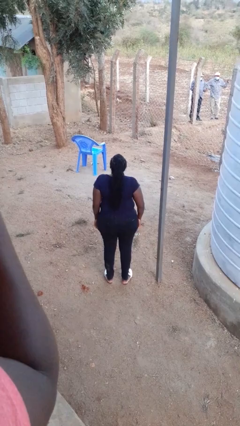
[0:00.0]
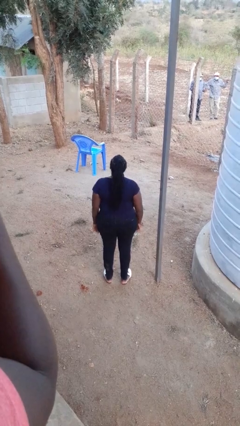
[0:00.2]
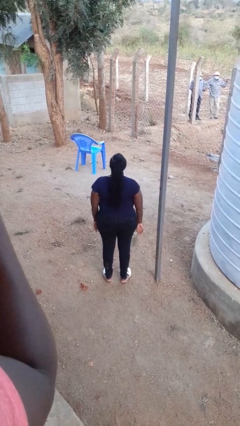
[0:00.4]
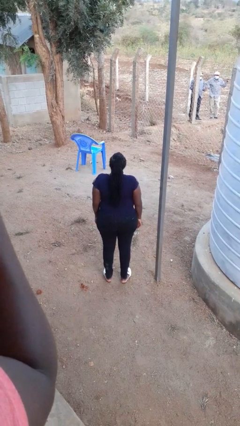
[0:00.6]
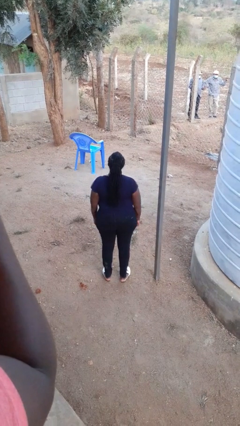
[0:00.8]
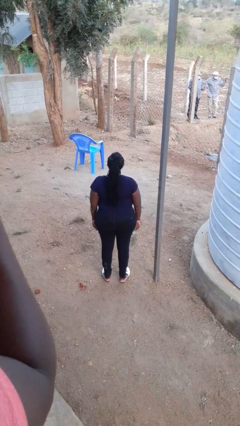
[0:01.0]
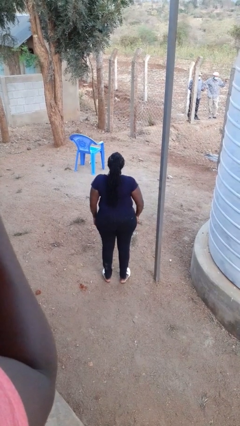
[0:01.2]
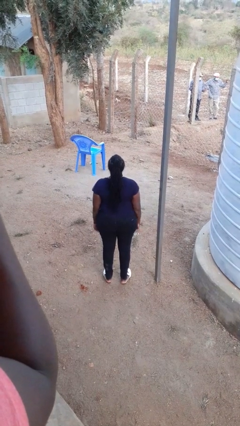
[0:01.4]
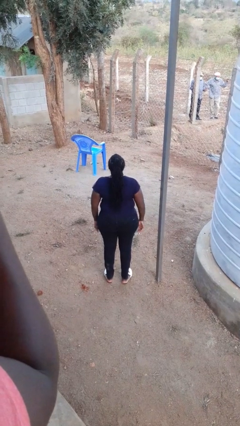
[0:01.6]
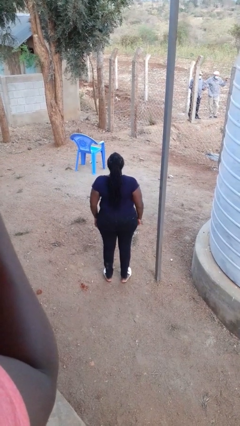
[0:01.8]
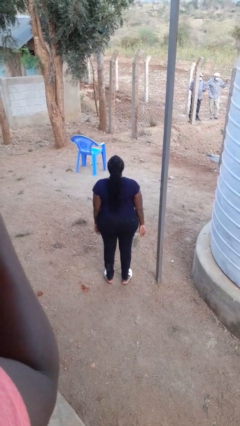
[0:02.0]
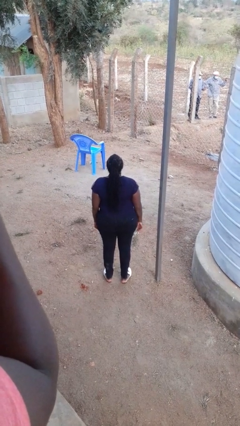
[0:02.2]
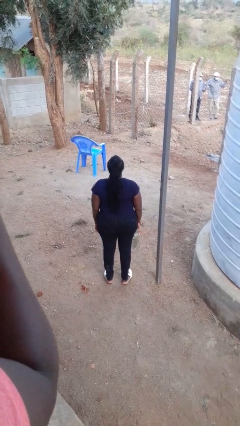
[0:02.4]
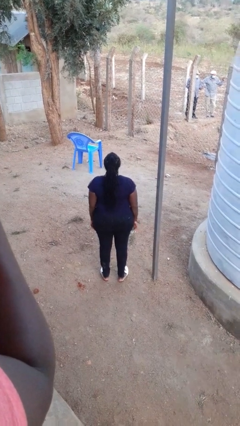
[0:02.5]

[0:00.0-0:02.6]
person shrugs

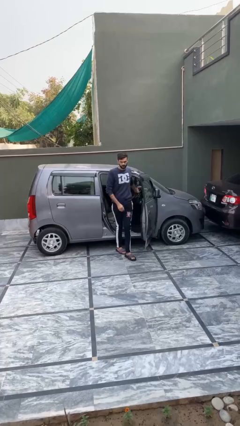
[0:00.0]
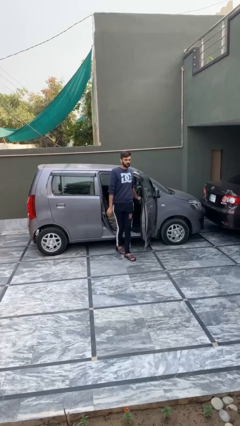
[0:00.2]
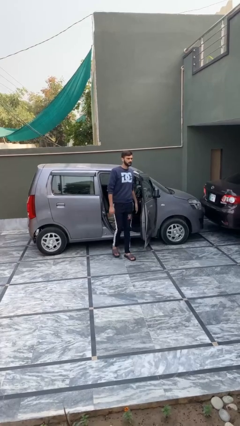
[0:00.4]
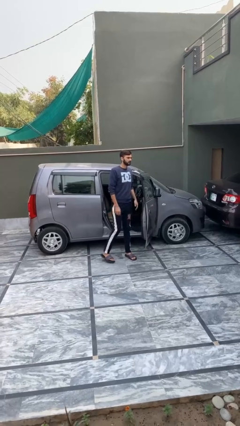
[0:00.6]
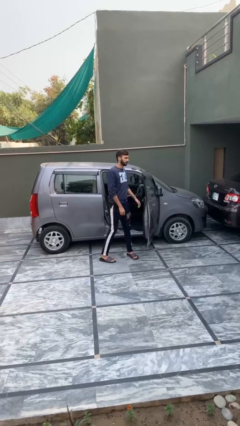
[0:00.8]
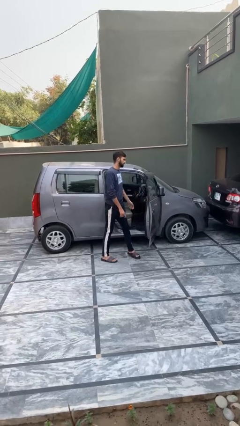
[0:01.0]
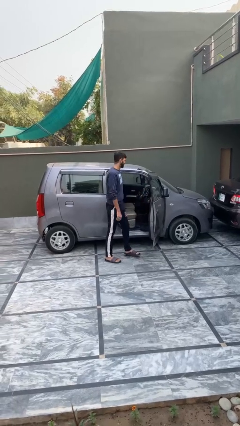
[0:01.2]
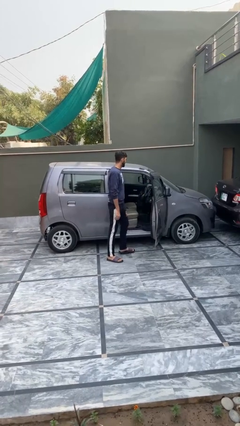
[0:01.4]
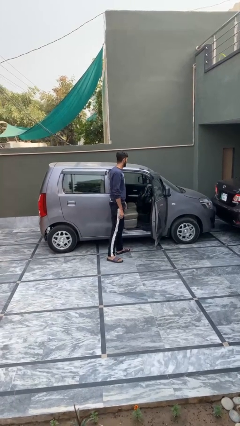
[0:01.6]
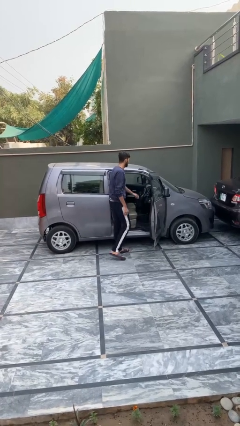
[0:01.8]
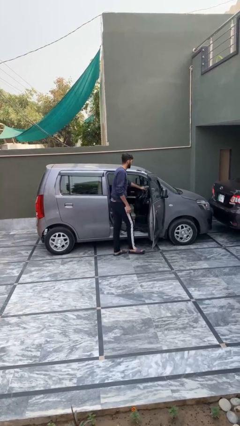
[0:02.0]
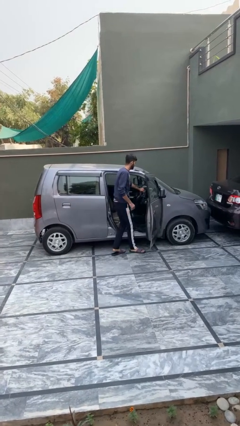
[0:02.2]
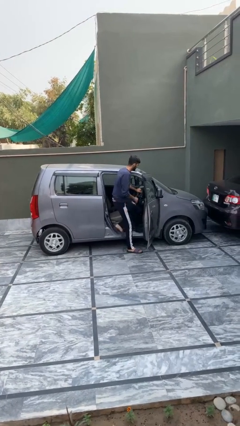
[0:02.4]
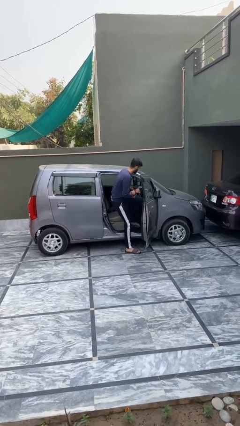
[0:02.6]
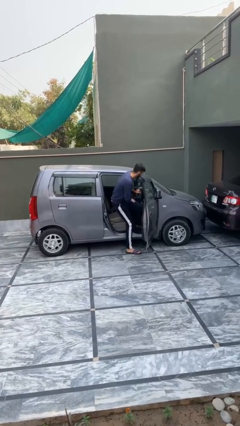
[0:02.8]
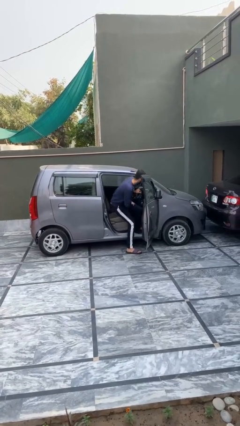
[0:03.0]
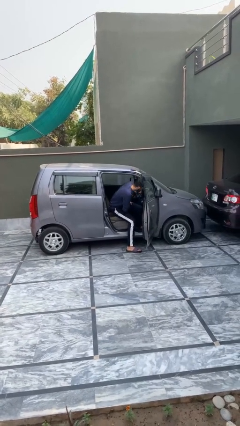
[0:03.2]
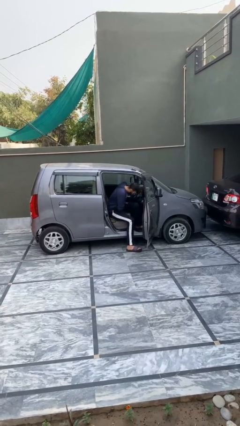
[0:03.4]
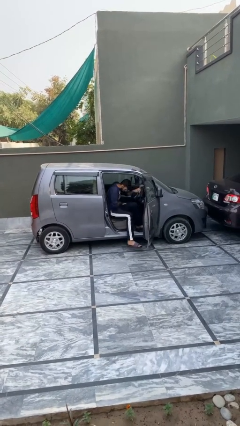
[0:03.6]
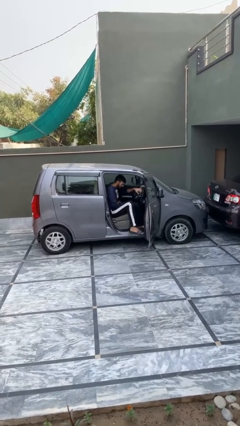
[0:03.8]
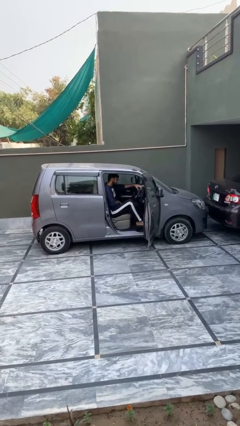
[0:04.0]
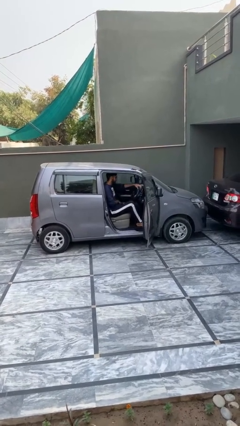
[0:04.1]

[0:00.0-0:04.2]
person enters car

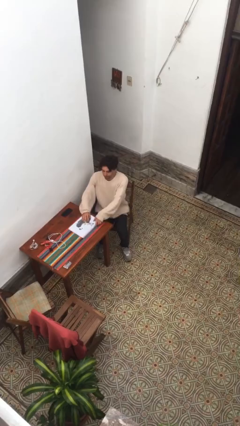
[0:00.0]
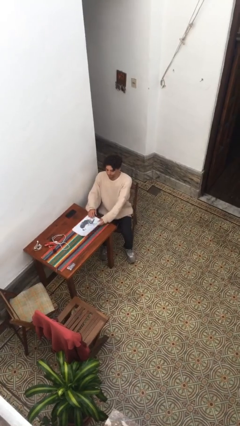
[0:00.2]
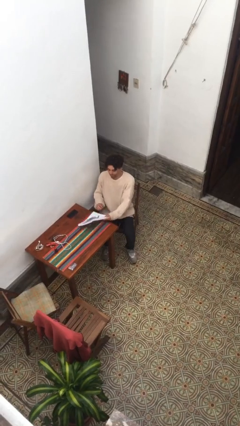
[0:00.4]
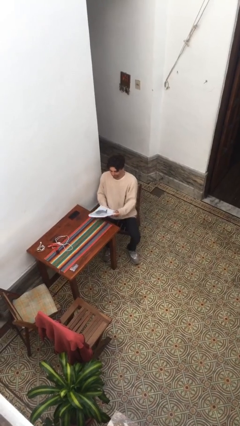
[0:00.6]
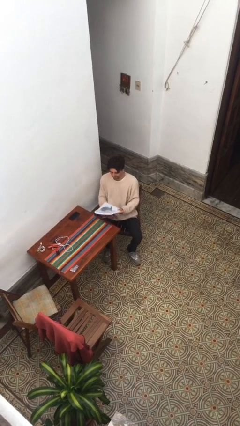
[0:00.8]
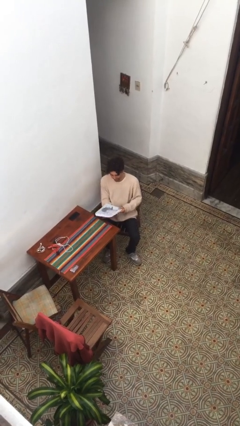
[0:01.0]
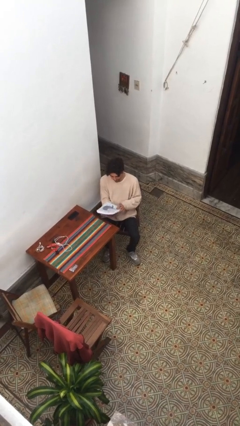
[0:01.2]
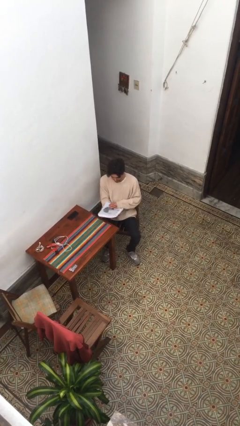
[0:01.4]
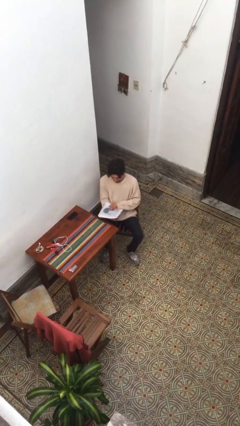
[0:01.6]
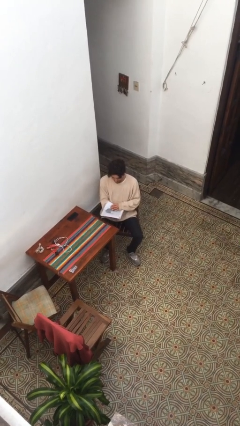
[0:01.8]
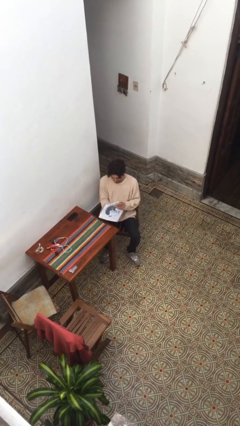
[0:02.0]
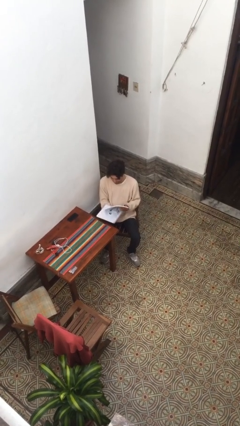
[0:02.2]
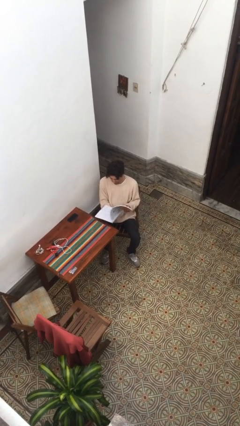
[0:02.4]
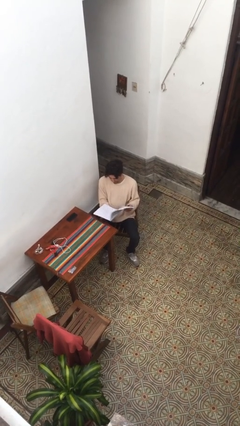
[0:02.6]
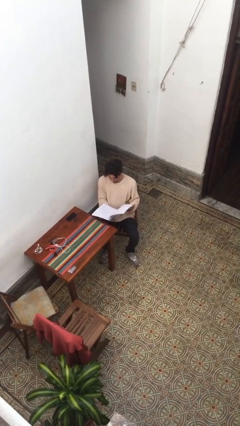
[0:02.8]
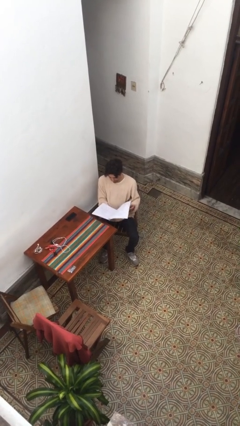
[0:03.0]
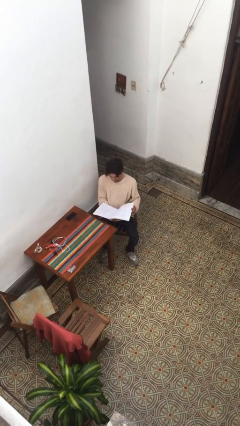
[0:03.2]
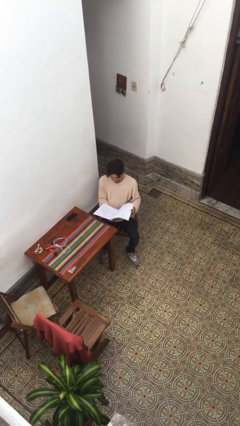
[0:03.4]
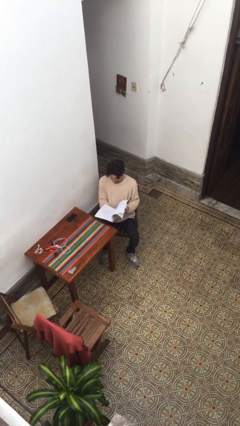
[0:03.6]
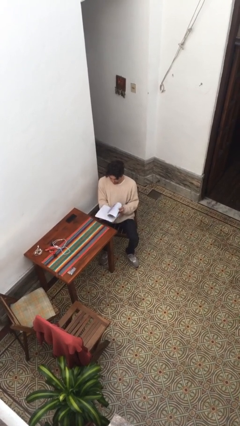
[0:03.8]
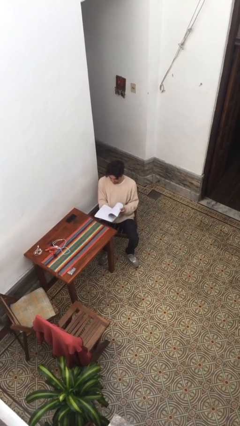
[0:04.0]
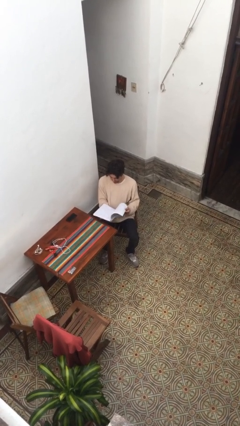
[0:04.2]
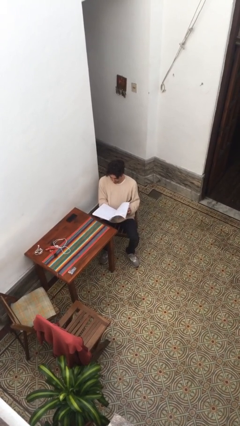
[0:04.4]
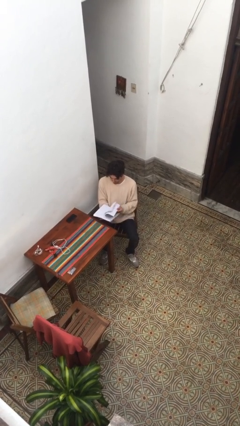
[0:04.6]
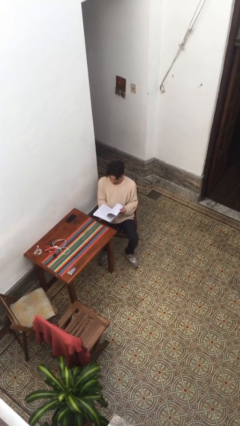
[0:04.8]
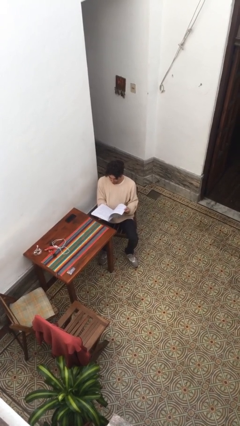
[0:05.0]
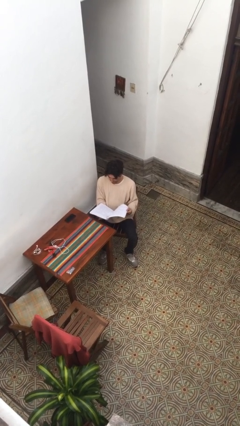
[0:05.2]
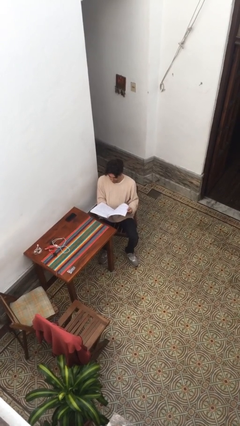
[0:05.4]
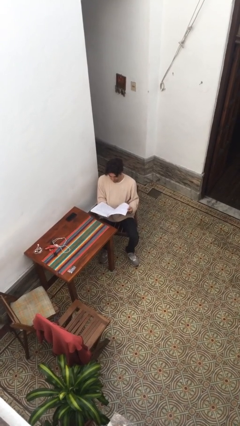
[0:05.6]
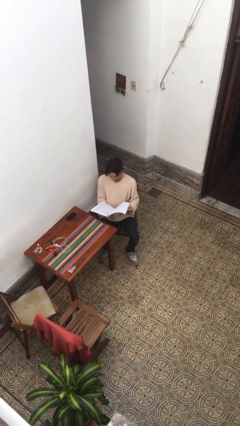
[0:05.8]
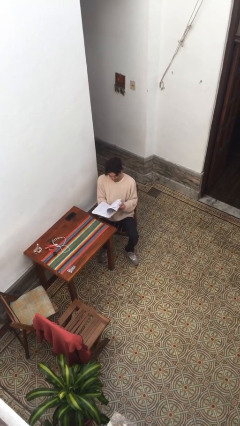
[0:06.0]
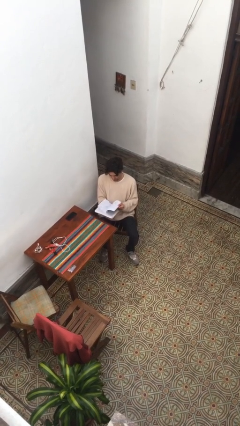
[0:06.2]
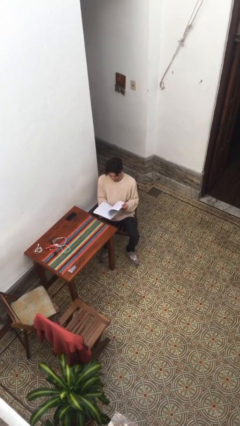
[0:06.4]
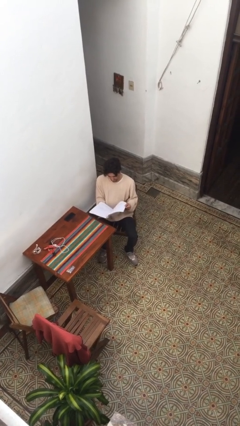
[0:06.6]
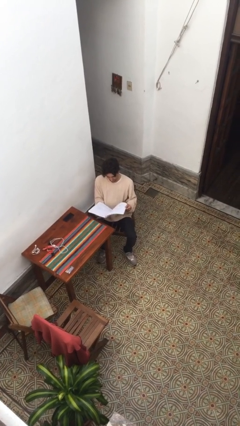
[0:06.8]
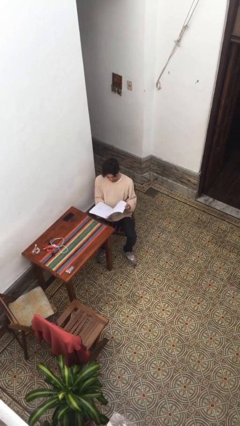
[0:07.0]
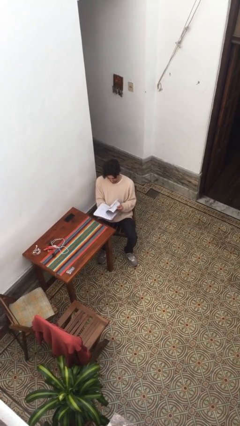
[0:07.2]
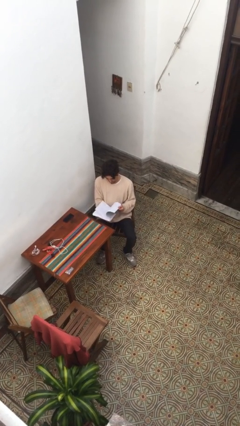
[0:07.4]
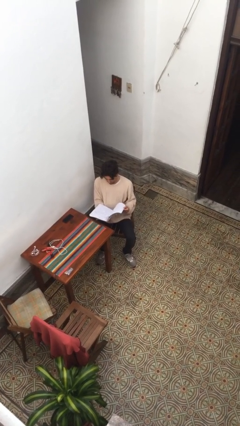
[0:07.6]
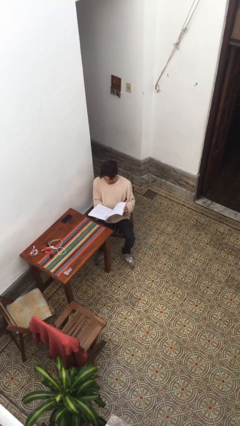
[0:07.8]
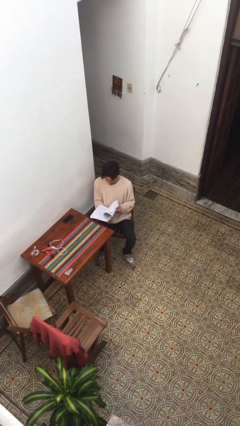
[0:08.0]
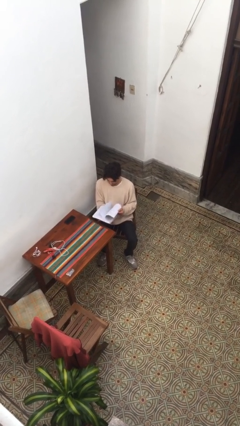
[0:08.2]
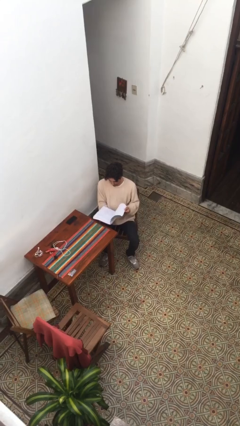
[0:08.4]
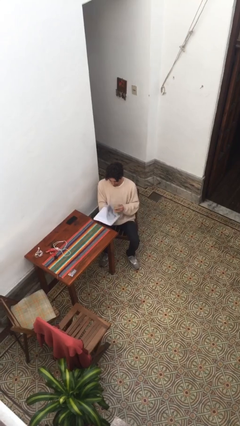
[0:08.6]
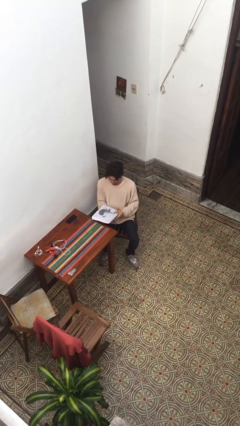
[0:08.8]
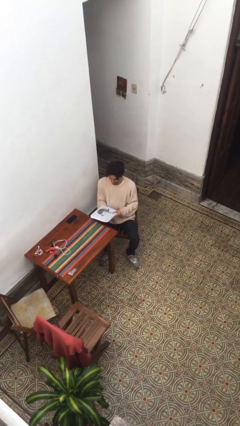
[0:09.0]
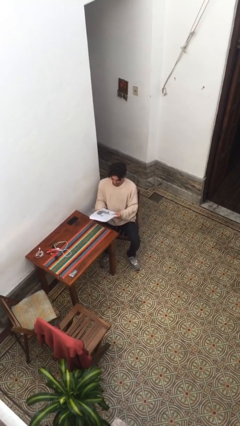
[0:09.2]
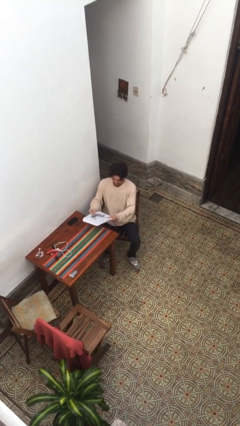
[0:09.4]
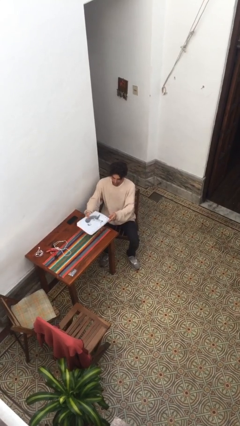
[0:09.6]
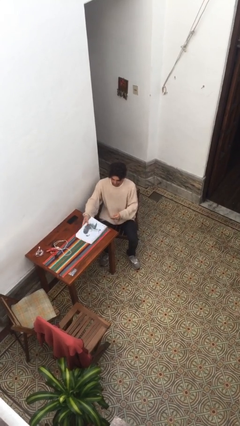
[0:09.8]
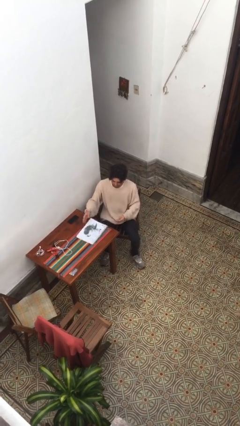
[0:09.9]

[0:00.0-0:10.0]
person reads document

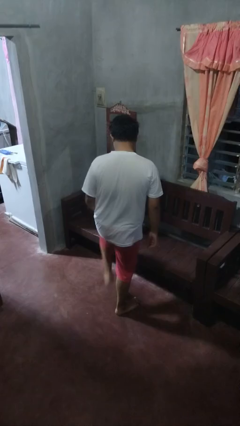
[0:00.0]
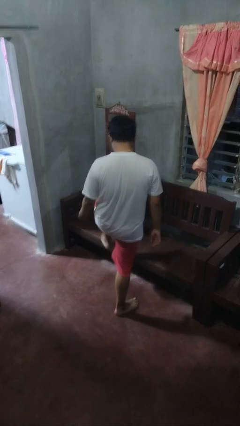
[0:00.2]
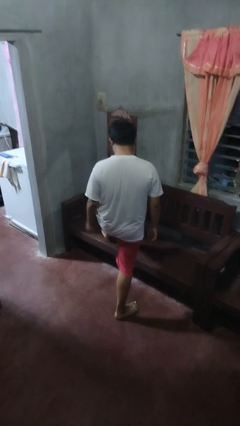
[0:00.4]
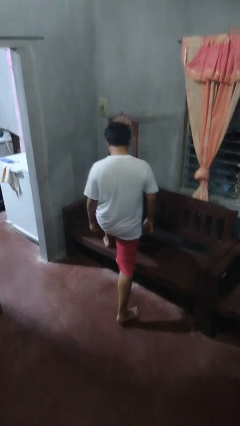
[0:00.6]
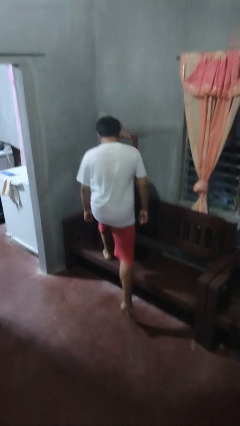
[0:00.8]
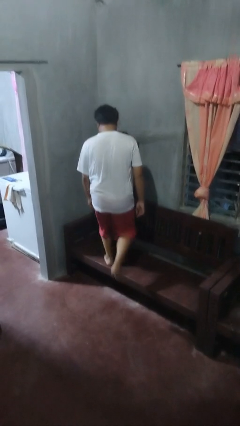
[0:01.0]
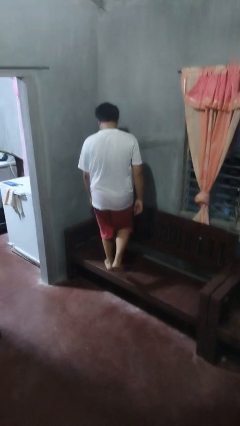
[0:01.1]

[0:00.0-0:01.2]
person climbs on couch
